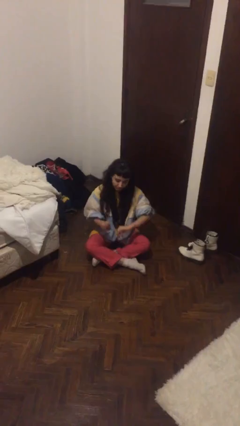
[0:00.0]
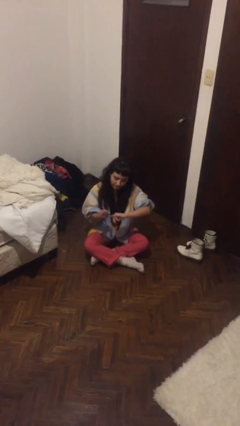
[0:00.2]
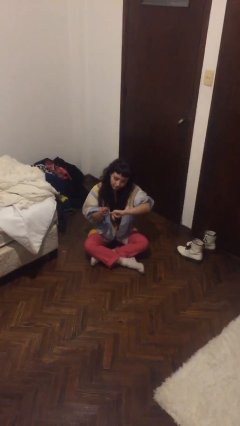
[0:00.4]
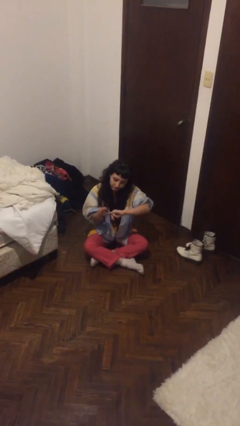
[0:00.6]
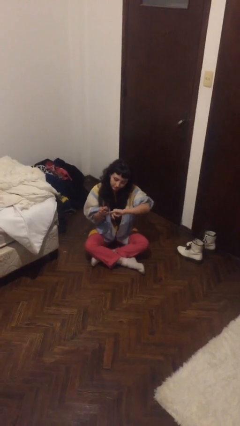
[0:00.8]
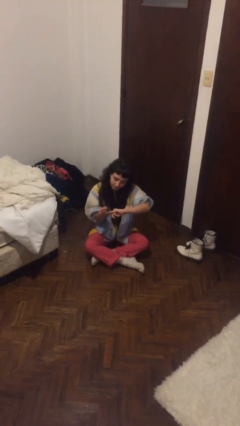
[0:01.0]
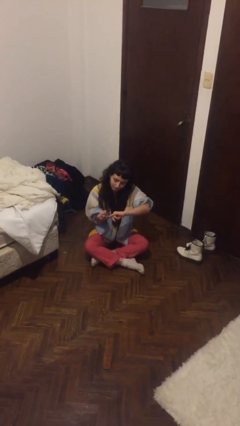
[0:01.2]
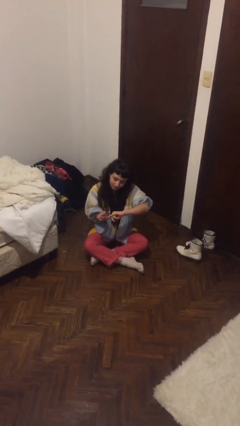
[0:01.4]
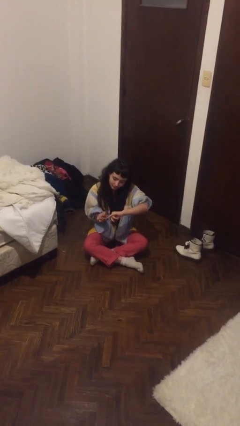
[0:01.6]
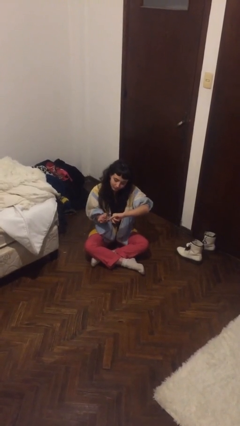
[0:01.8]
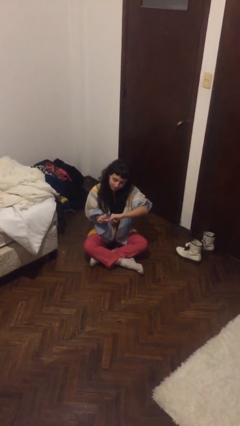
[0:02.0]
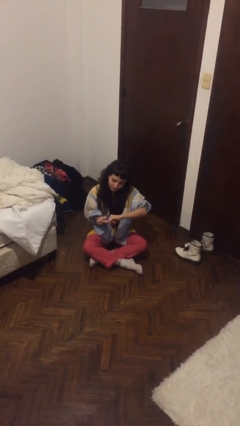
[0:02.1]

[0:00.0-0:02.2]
person clips fingernails

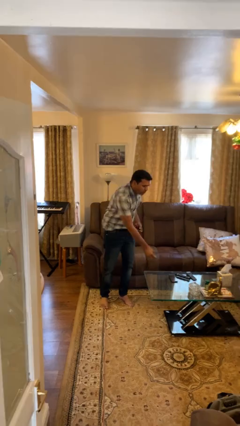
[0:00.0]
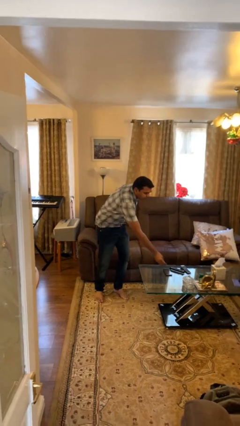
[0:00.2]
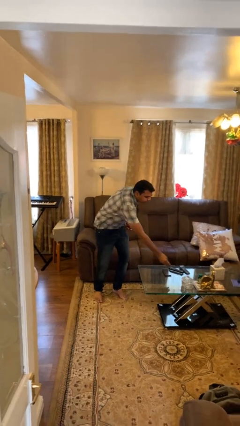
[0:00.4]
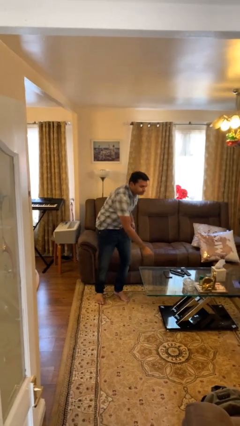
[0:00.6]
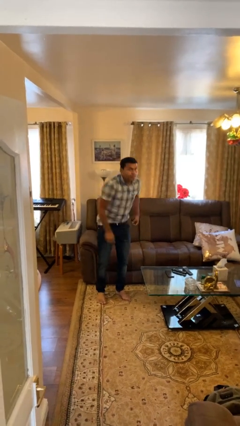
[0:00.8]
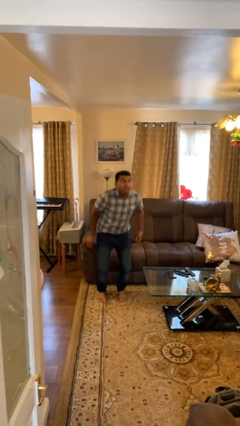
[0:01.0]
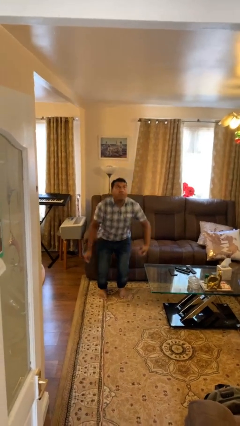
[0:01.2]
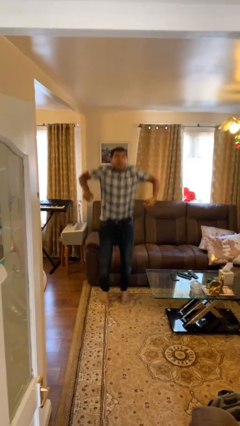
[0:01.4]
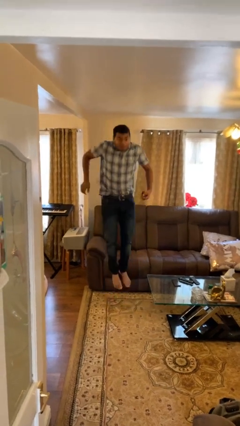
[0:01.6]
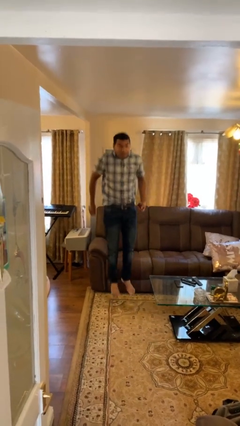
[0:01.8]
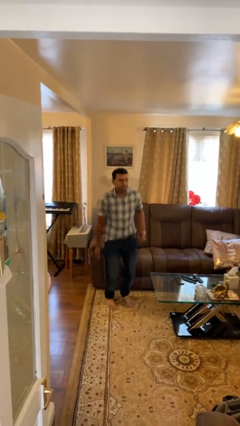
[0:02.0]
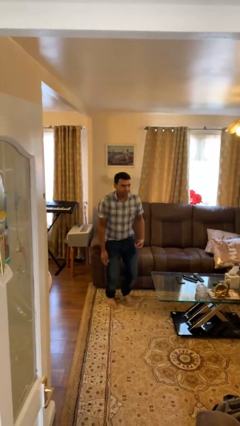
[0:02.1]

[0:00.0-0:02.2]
person jumps

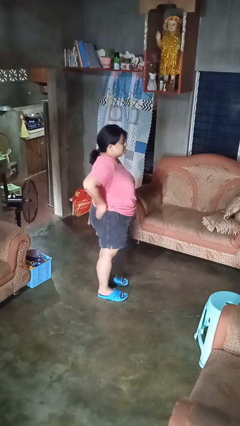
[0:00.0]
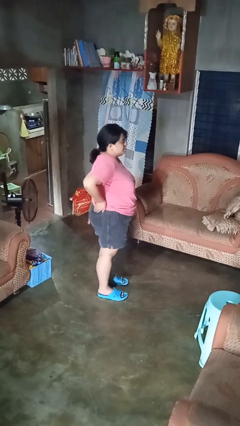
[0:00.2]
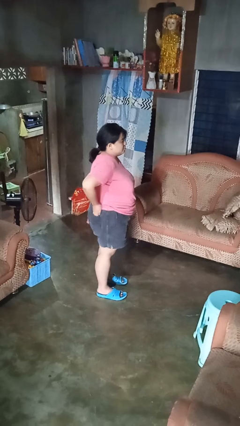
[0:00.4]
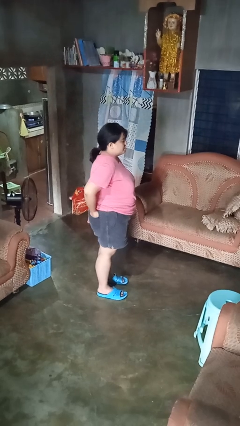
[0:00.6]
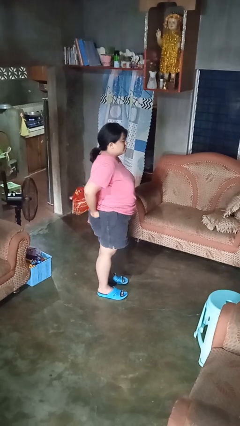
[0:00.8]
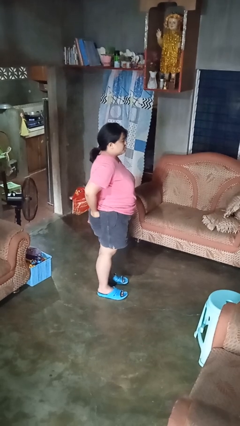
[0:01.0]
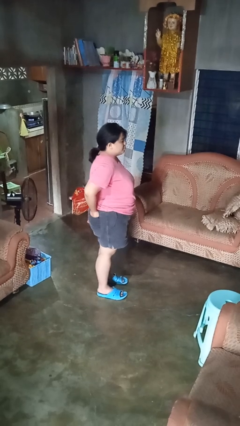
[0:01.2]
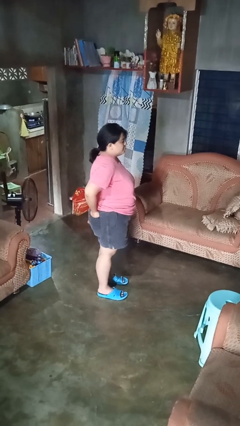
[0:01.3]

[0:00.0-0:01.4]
person puts hands in back pockets

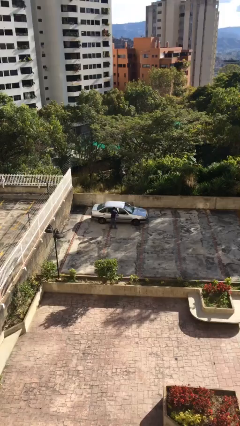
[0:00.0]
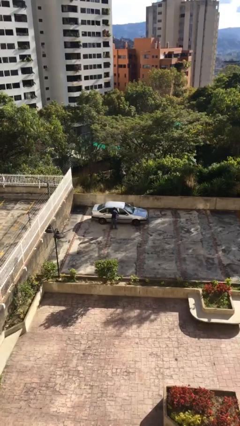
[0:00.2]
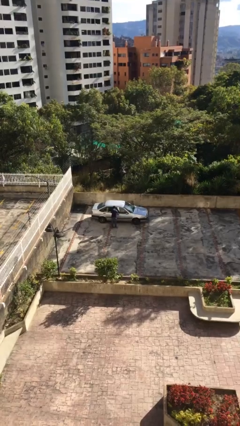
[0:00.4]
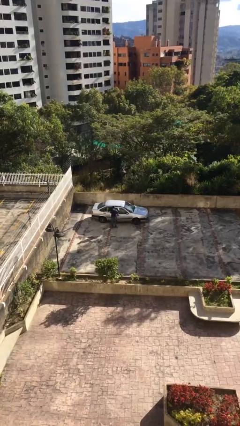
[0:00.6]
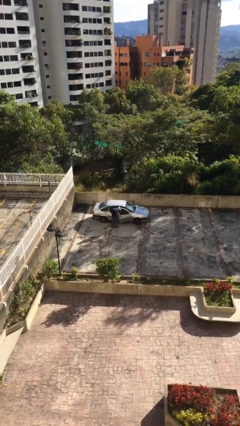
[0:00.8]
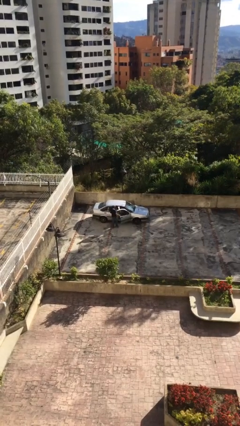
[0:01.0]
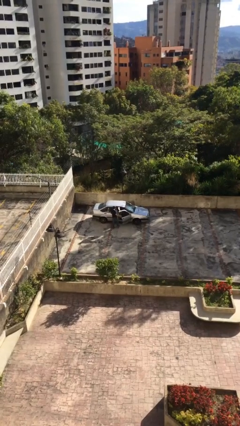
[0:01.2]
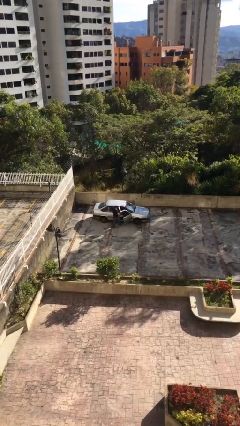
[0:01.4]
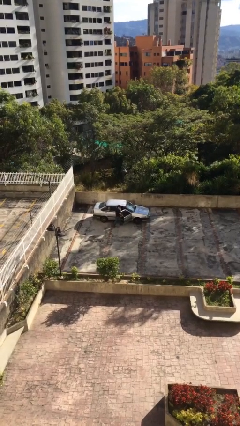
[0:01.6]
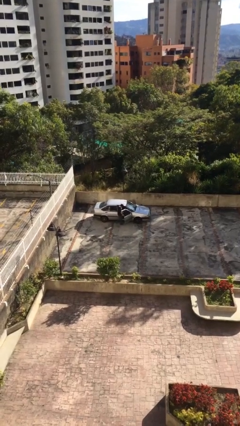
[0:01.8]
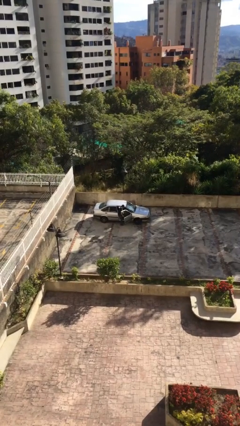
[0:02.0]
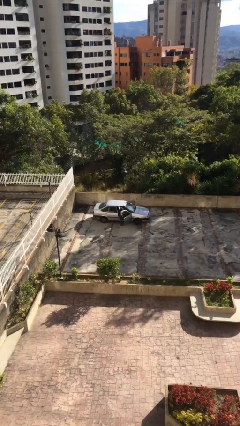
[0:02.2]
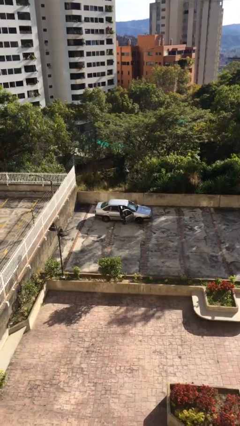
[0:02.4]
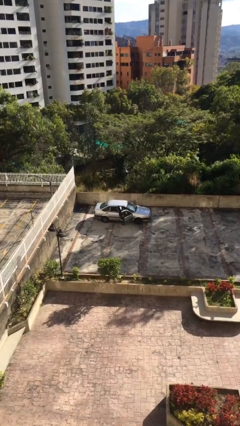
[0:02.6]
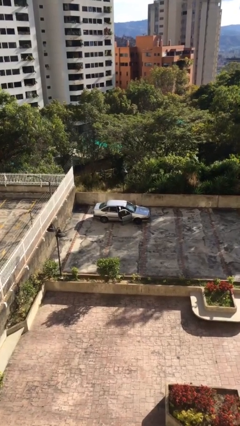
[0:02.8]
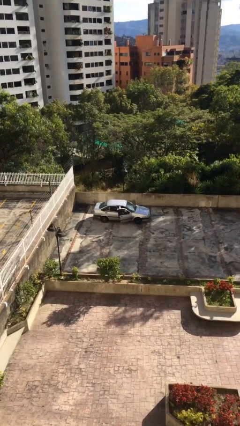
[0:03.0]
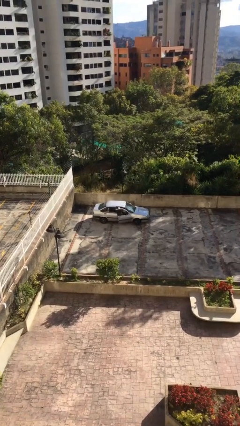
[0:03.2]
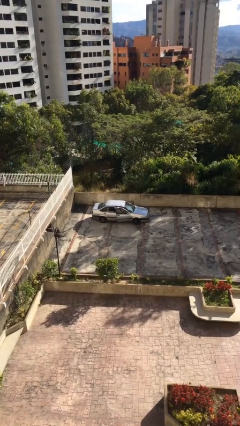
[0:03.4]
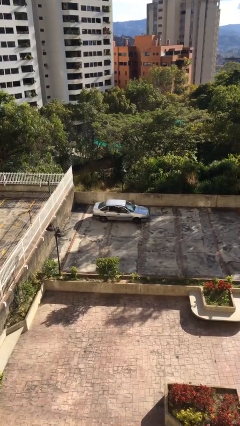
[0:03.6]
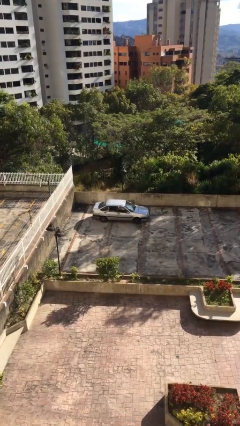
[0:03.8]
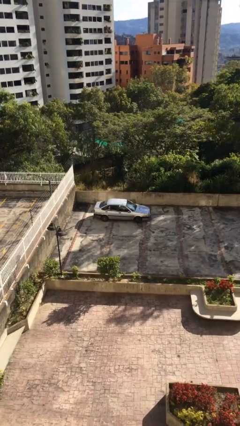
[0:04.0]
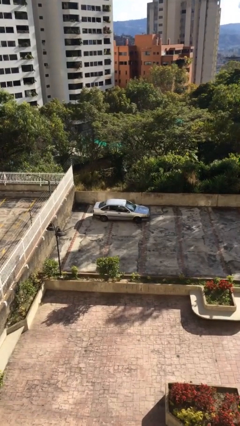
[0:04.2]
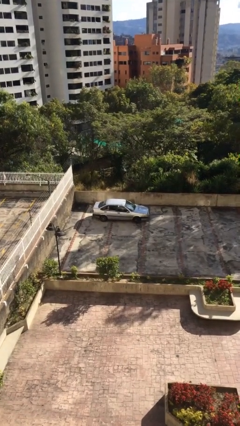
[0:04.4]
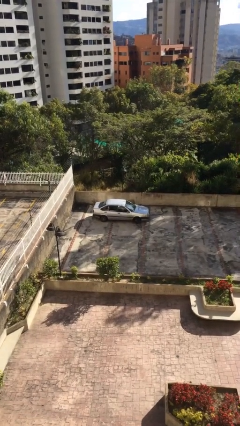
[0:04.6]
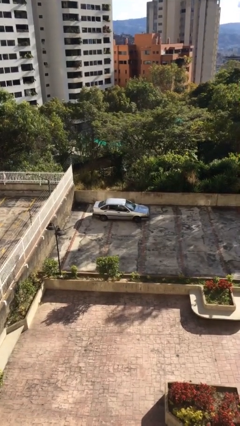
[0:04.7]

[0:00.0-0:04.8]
car picks up person

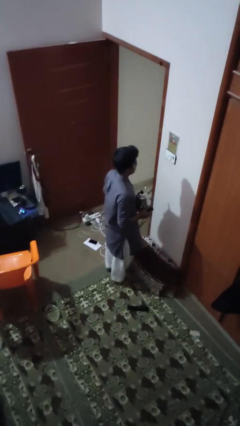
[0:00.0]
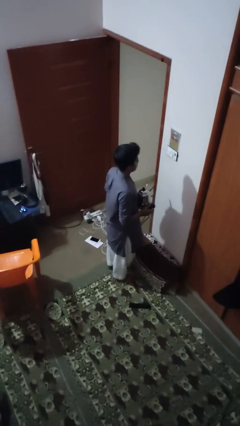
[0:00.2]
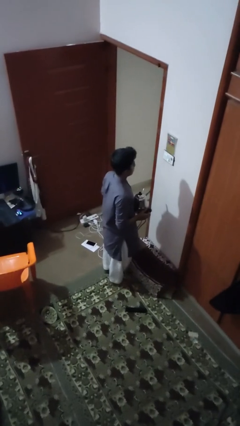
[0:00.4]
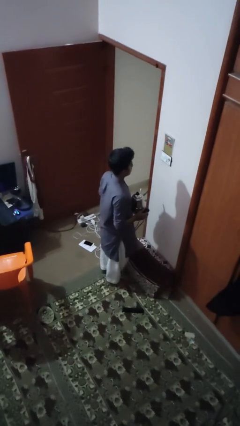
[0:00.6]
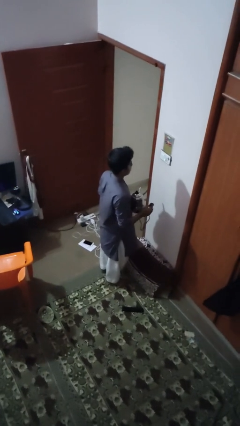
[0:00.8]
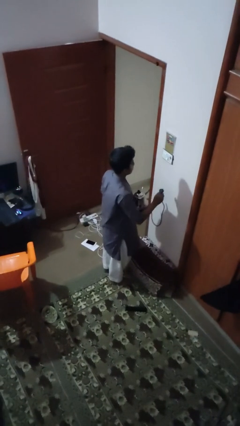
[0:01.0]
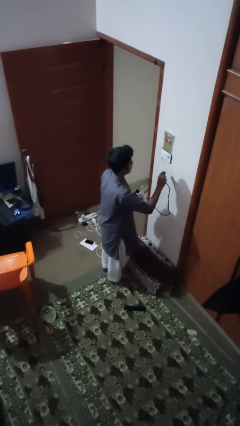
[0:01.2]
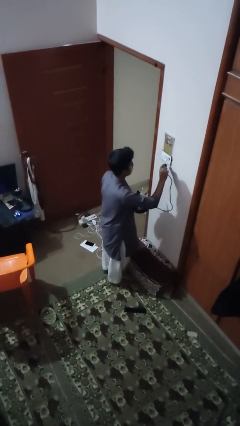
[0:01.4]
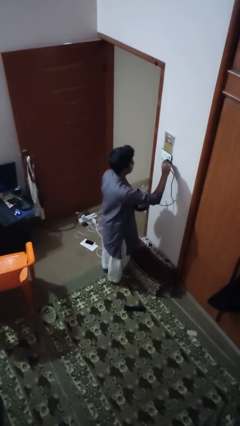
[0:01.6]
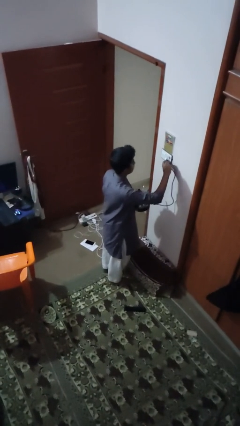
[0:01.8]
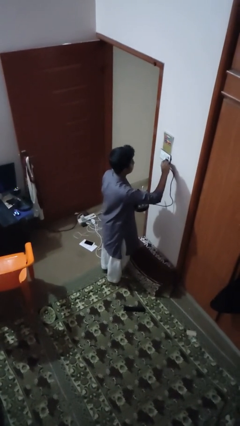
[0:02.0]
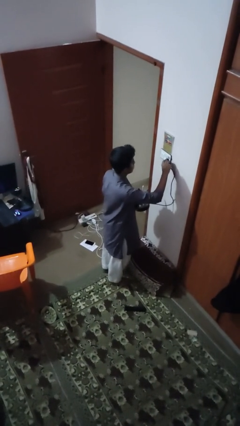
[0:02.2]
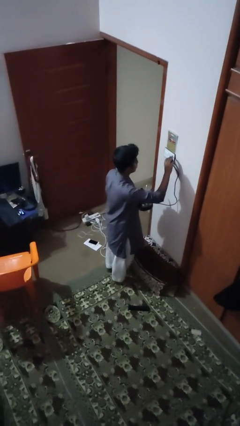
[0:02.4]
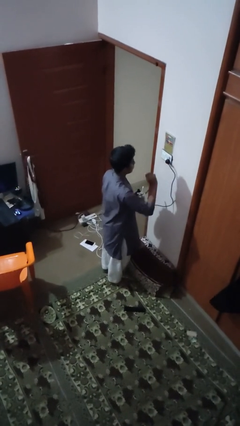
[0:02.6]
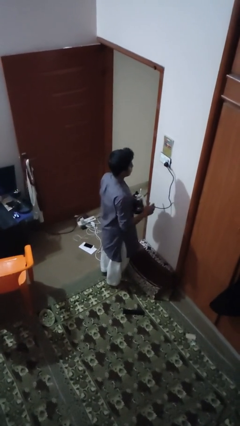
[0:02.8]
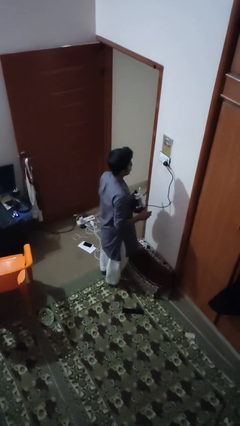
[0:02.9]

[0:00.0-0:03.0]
person plugs into electrical socket

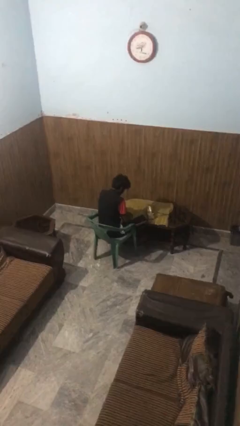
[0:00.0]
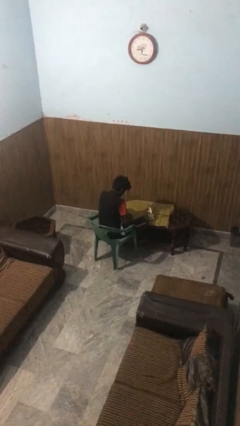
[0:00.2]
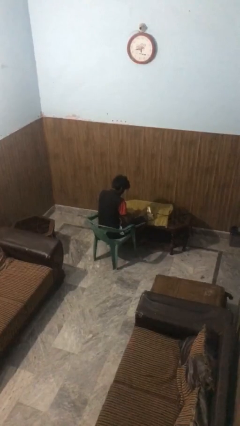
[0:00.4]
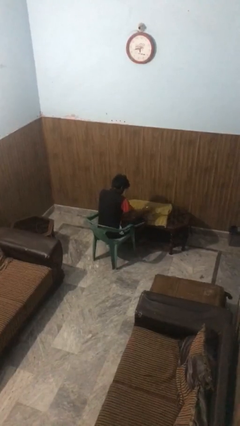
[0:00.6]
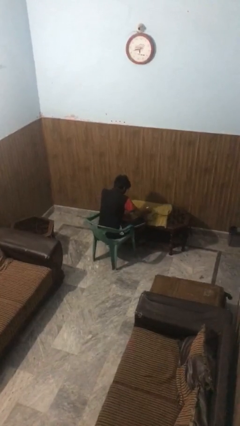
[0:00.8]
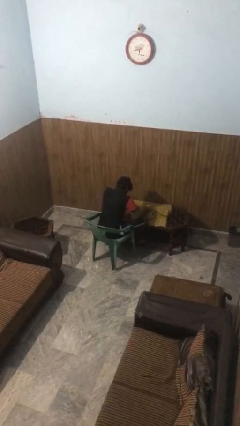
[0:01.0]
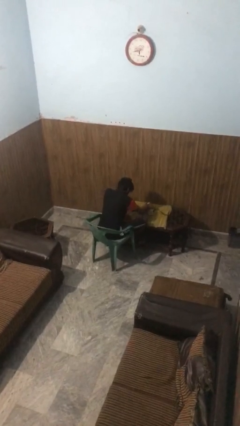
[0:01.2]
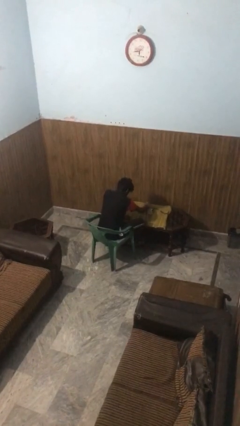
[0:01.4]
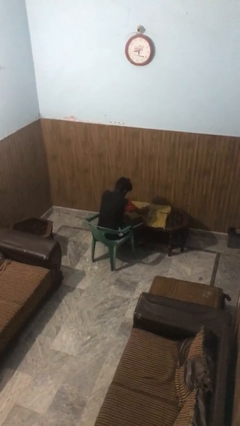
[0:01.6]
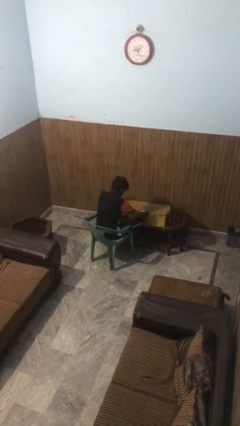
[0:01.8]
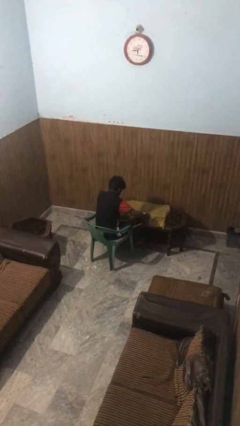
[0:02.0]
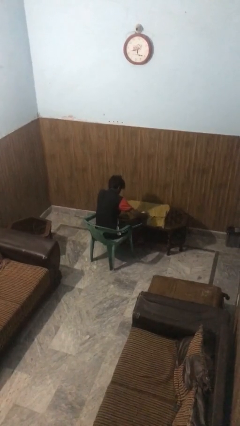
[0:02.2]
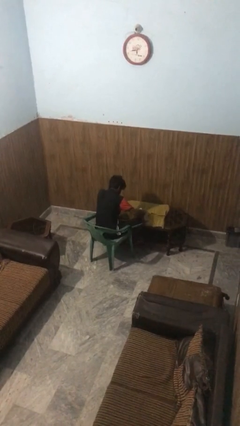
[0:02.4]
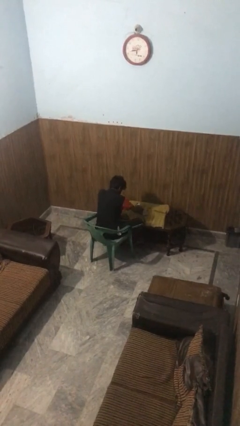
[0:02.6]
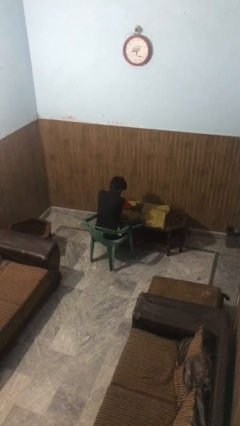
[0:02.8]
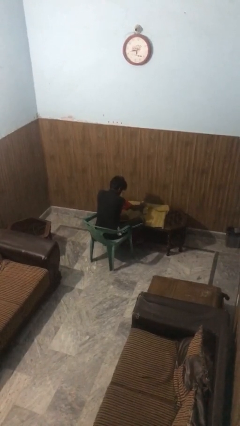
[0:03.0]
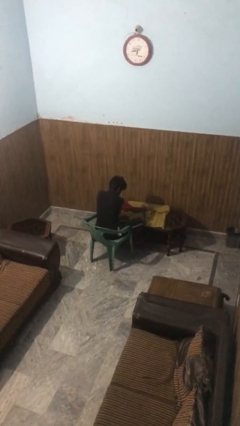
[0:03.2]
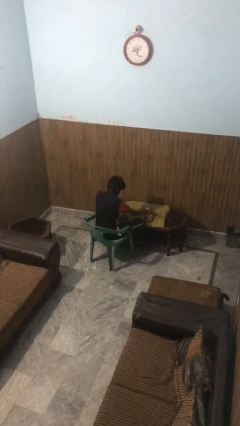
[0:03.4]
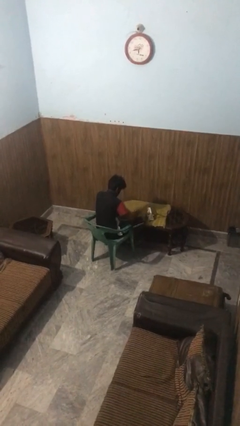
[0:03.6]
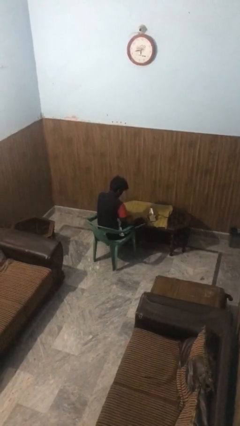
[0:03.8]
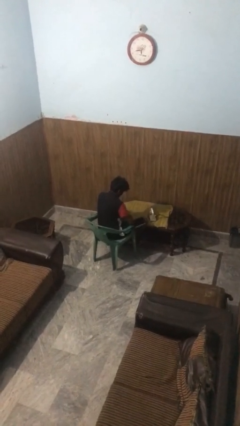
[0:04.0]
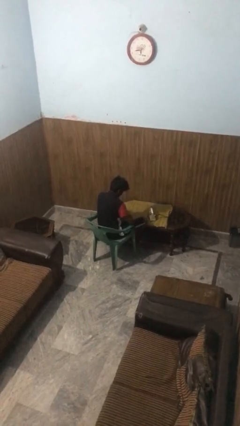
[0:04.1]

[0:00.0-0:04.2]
person irons clothes
